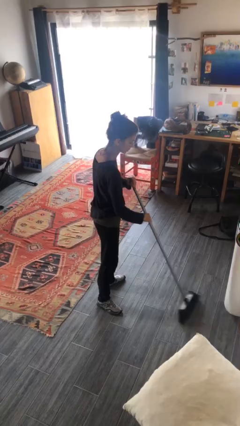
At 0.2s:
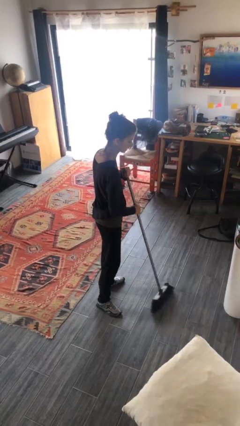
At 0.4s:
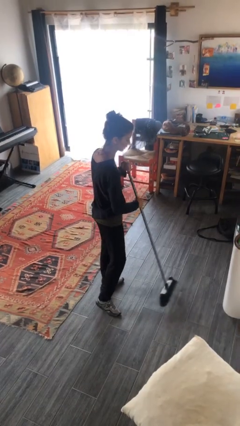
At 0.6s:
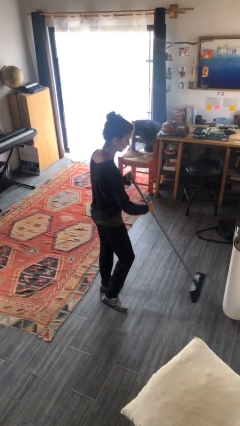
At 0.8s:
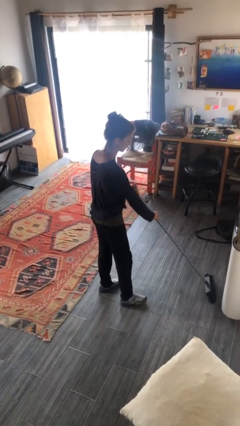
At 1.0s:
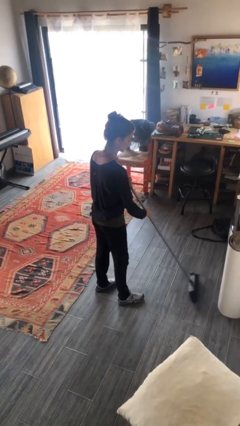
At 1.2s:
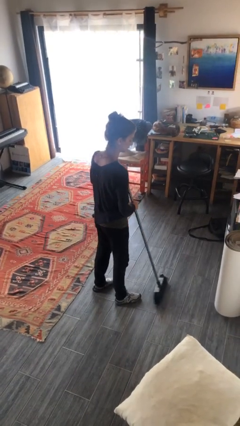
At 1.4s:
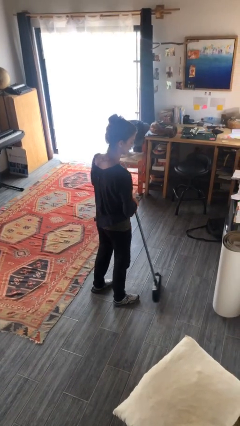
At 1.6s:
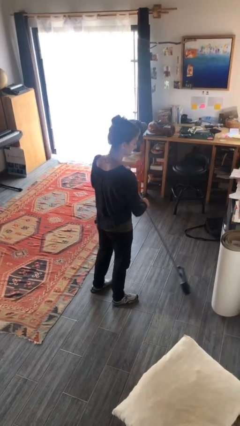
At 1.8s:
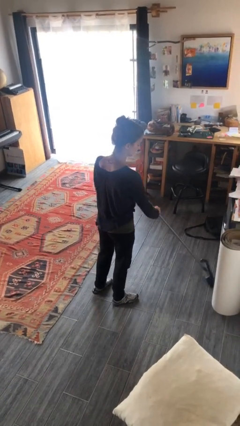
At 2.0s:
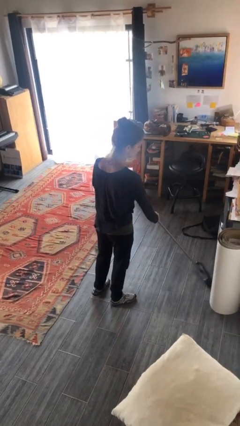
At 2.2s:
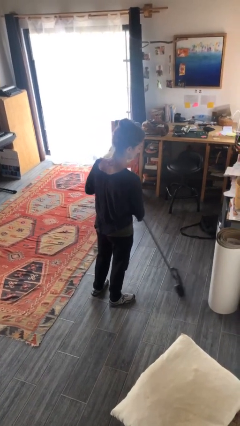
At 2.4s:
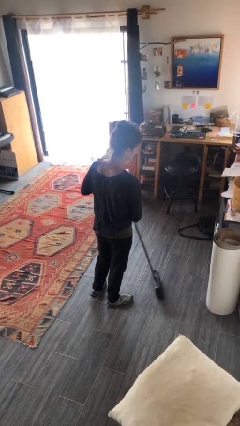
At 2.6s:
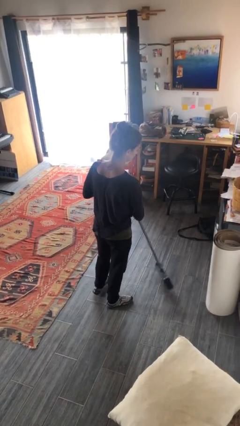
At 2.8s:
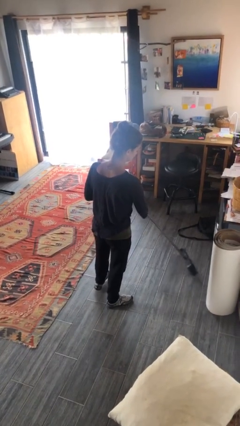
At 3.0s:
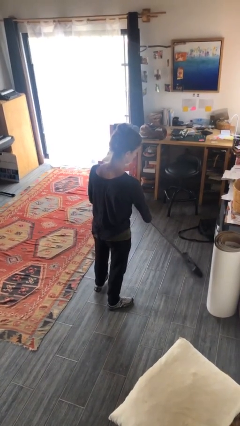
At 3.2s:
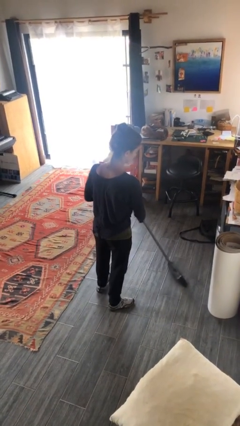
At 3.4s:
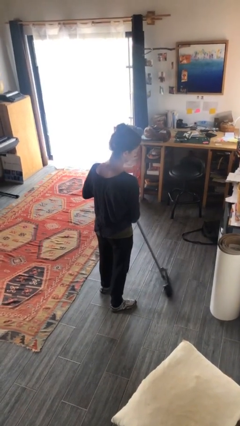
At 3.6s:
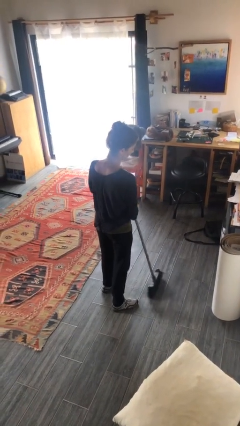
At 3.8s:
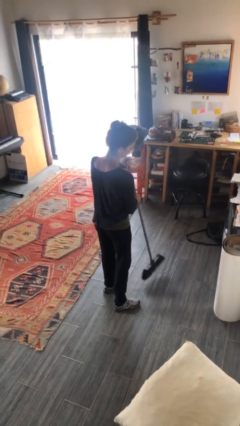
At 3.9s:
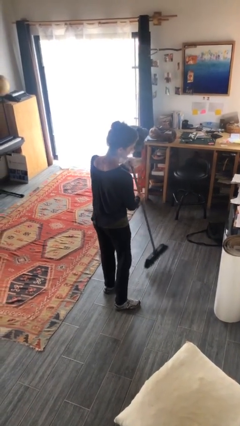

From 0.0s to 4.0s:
person sweeps floor

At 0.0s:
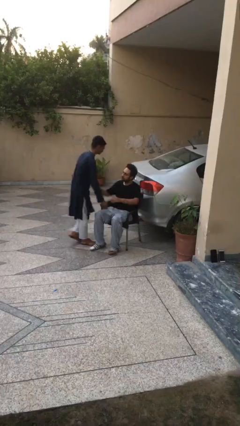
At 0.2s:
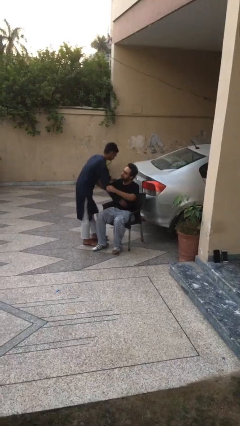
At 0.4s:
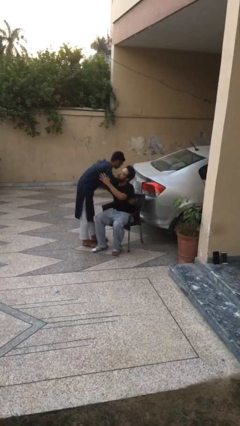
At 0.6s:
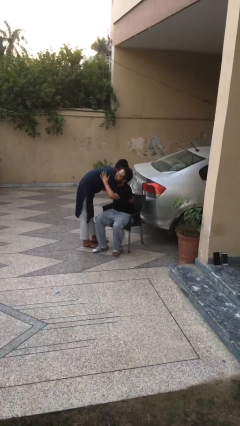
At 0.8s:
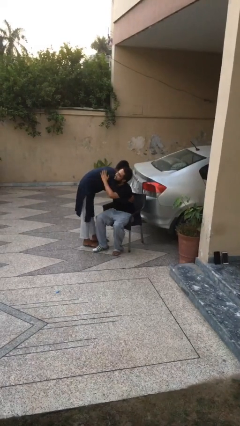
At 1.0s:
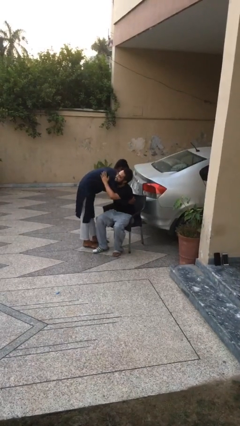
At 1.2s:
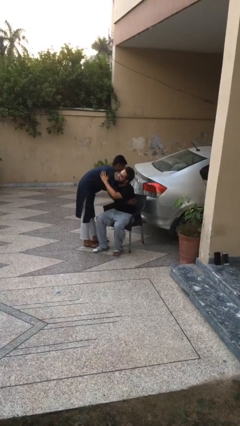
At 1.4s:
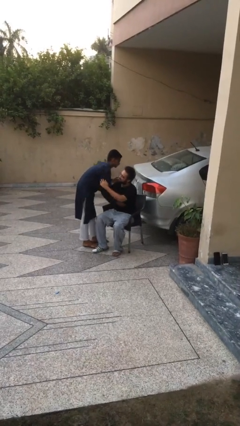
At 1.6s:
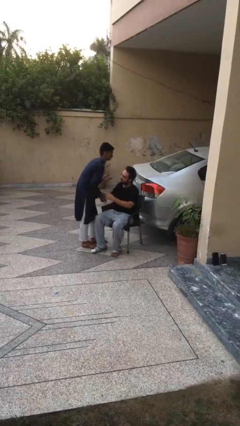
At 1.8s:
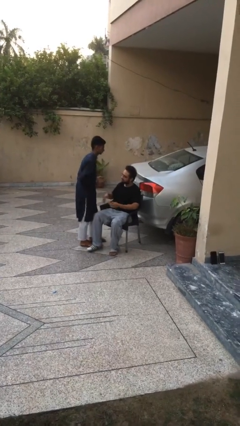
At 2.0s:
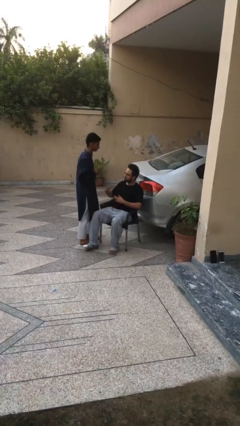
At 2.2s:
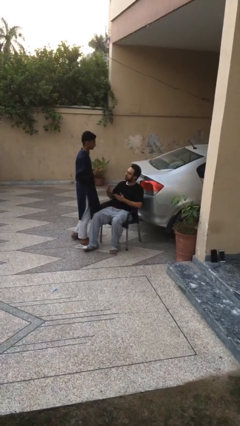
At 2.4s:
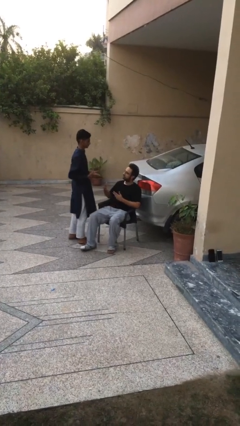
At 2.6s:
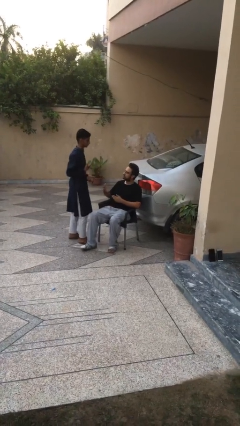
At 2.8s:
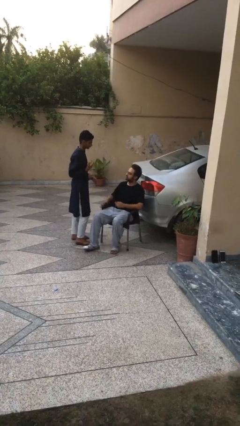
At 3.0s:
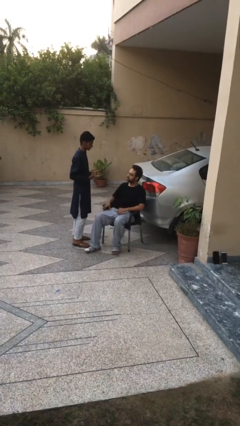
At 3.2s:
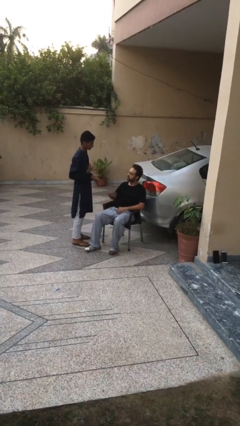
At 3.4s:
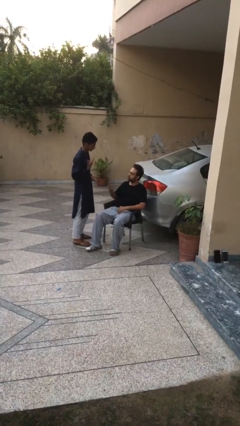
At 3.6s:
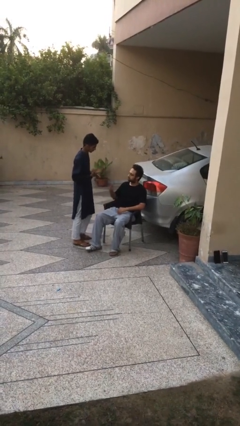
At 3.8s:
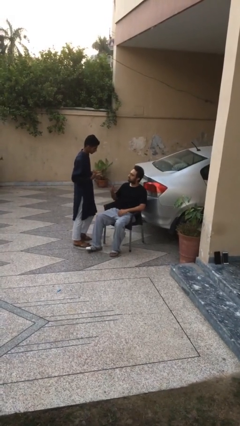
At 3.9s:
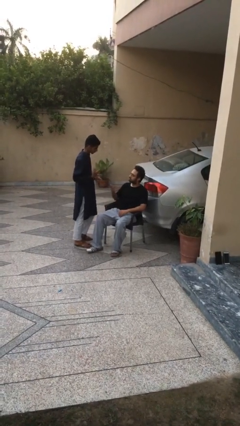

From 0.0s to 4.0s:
person embraces person

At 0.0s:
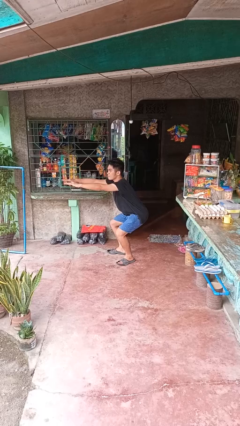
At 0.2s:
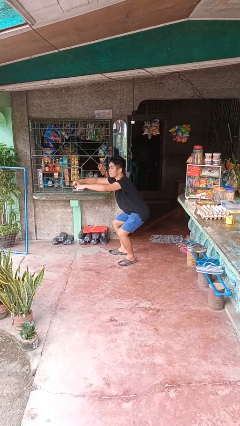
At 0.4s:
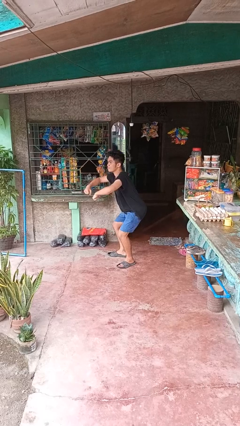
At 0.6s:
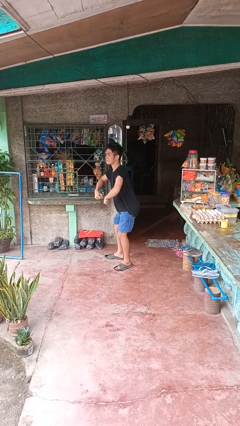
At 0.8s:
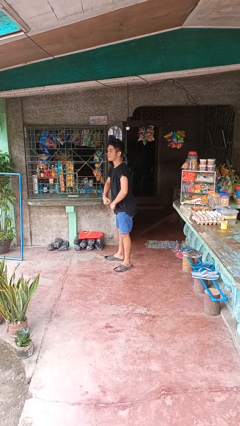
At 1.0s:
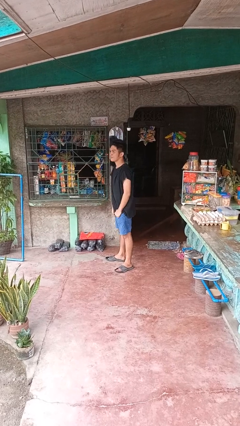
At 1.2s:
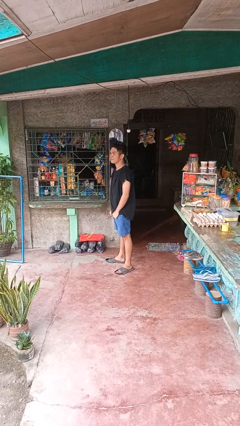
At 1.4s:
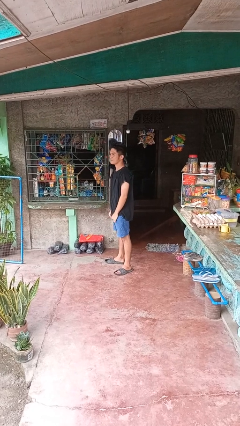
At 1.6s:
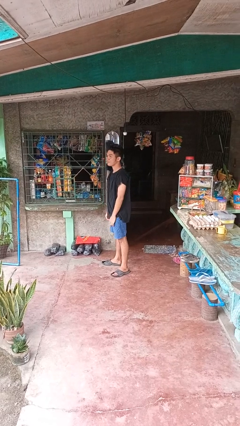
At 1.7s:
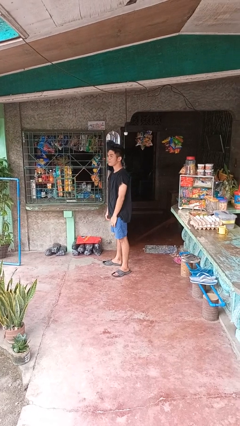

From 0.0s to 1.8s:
person stands up

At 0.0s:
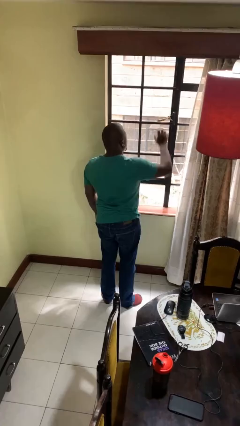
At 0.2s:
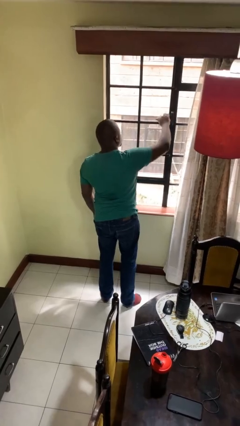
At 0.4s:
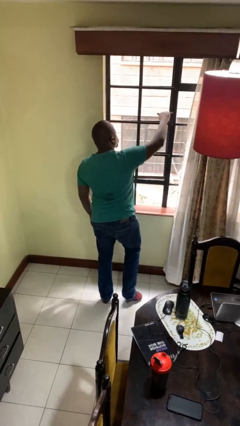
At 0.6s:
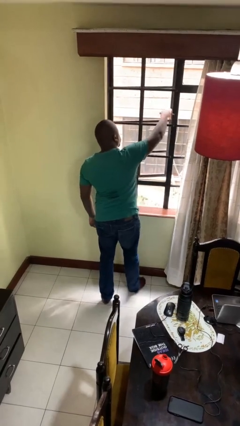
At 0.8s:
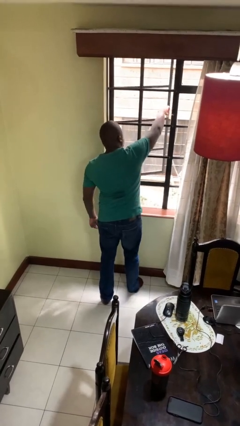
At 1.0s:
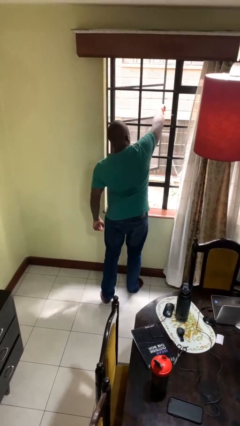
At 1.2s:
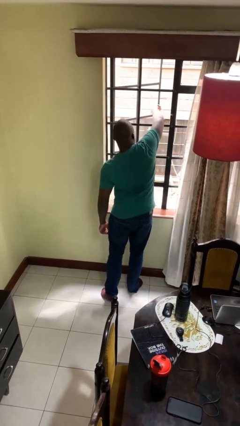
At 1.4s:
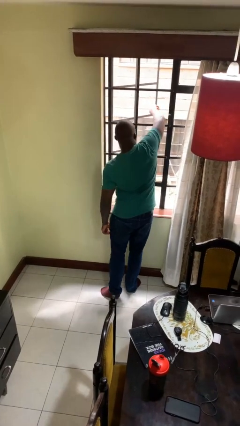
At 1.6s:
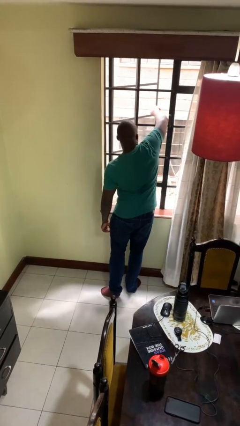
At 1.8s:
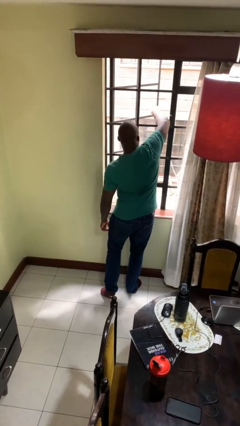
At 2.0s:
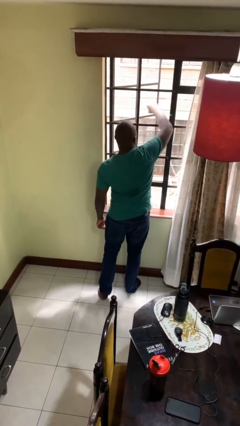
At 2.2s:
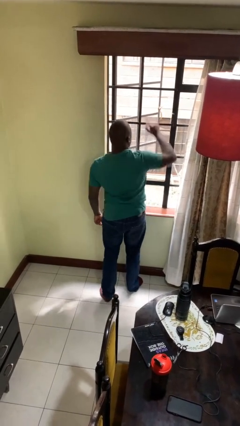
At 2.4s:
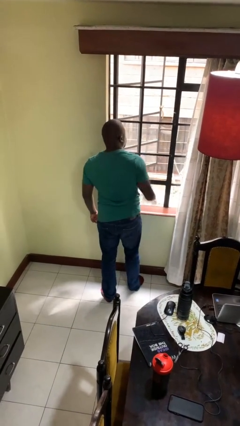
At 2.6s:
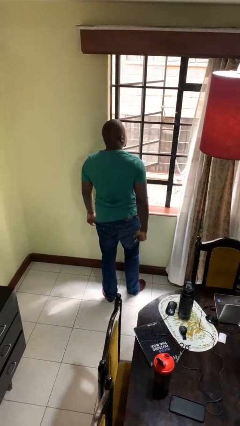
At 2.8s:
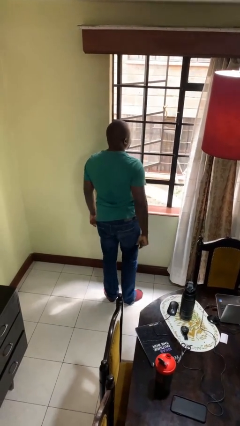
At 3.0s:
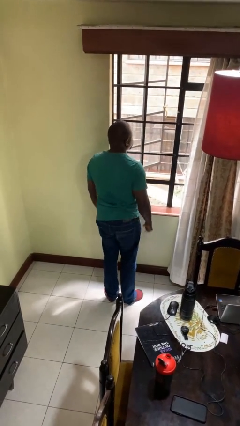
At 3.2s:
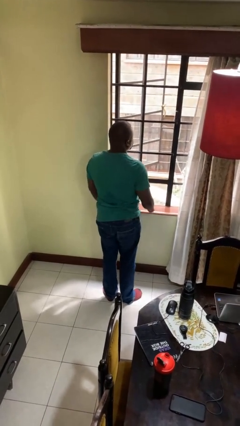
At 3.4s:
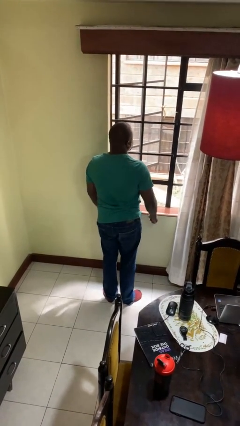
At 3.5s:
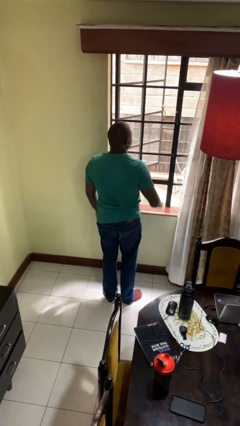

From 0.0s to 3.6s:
person opens home window

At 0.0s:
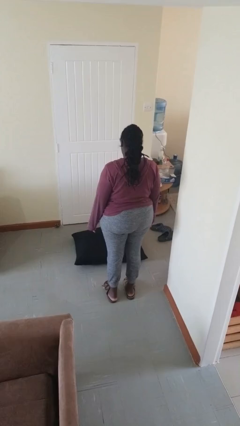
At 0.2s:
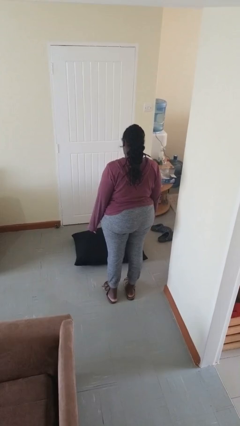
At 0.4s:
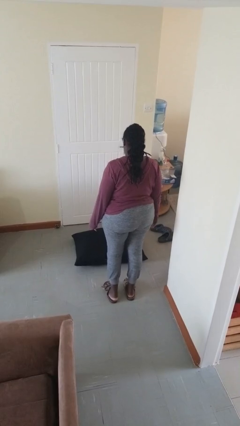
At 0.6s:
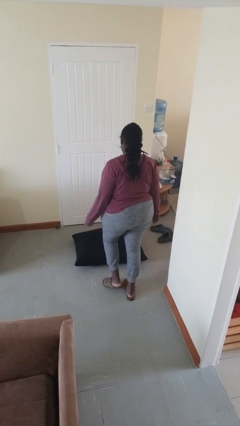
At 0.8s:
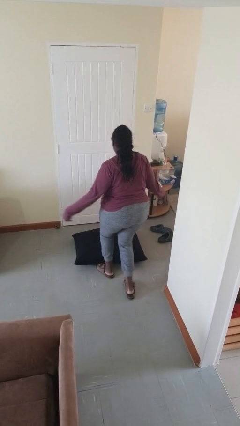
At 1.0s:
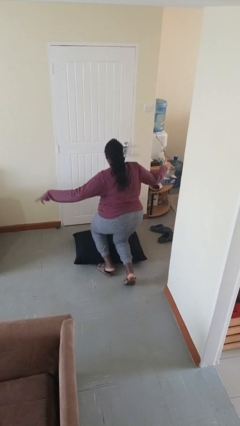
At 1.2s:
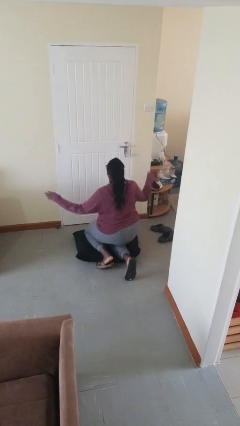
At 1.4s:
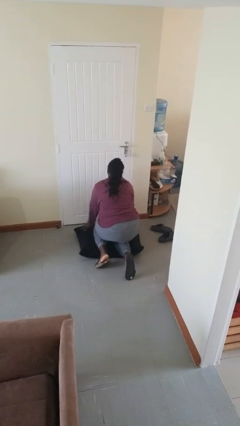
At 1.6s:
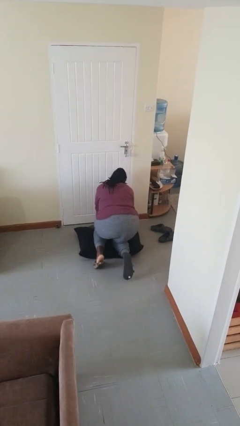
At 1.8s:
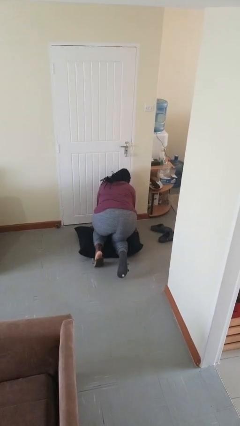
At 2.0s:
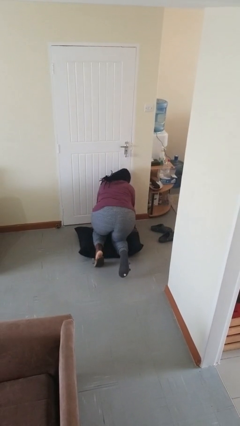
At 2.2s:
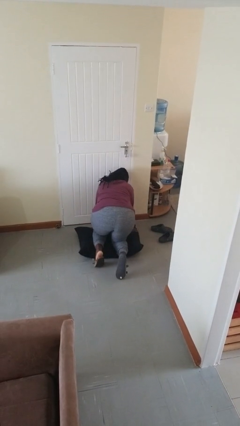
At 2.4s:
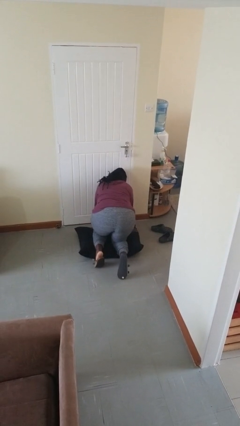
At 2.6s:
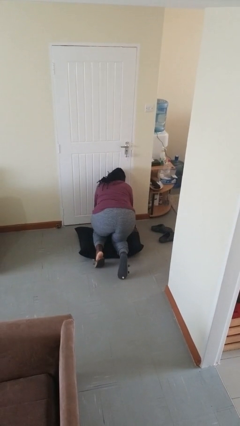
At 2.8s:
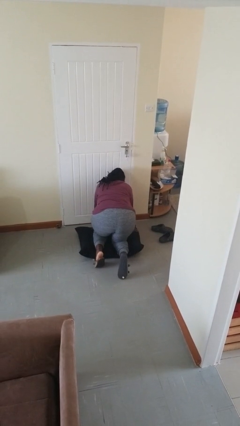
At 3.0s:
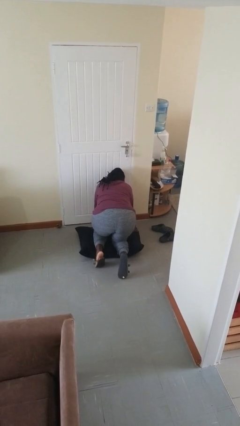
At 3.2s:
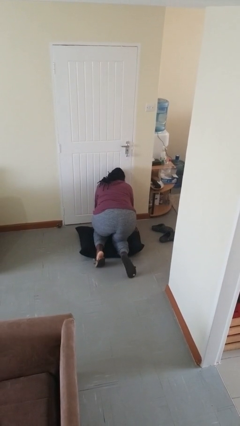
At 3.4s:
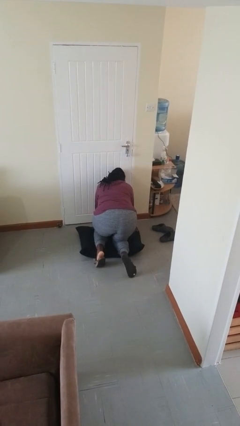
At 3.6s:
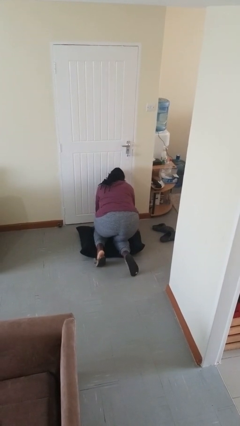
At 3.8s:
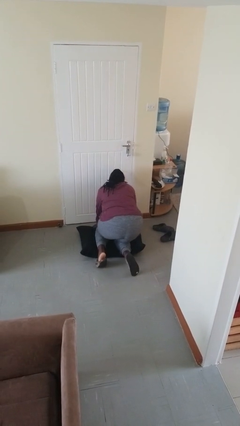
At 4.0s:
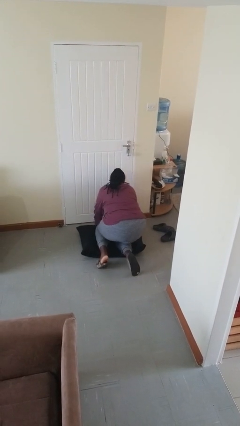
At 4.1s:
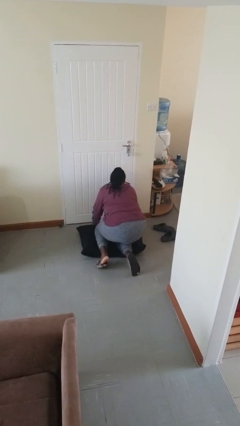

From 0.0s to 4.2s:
person trips on object on floor
